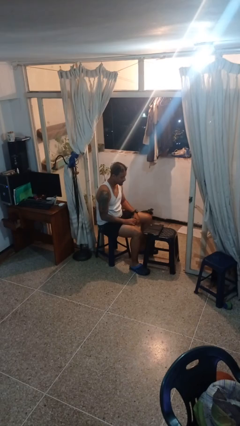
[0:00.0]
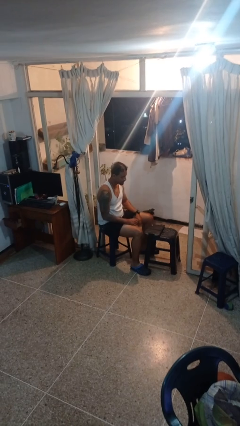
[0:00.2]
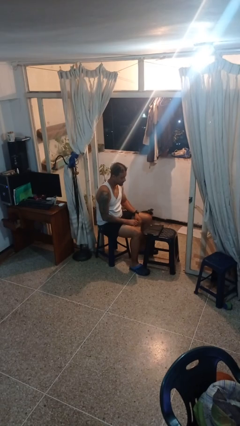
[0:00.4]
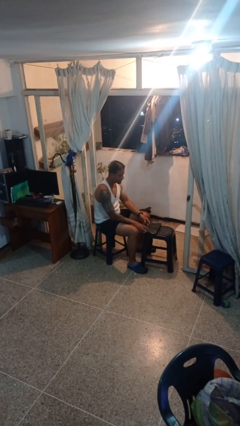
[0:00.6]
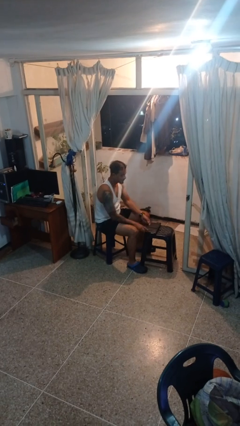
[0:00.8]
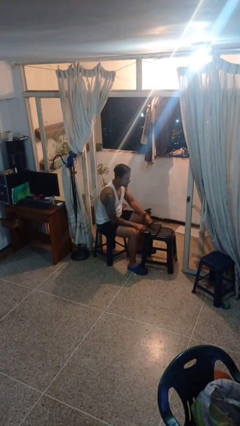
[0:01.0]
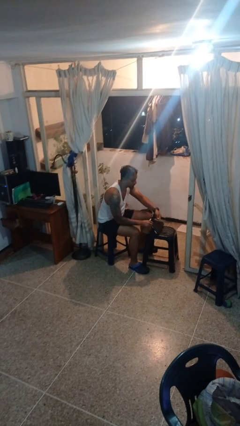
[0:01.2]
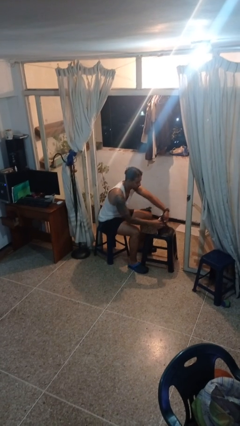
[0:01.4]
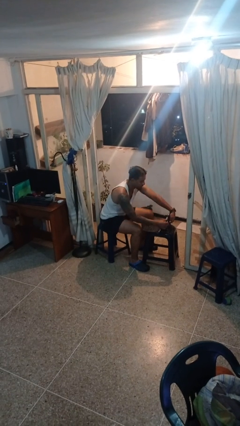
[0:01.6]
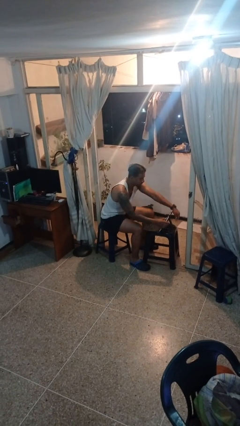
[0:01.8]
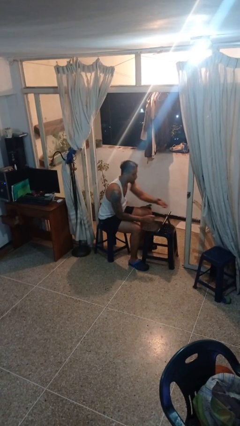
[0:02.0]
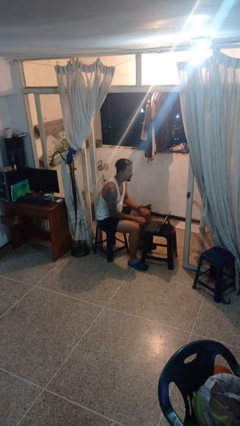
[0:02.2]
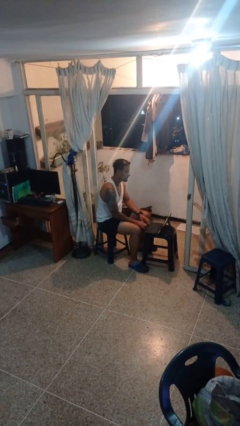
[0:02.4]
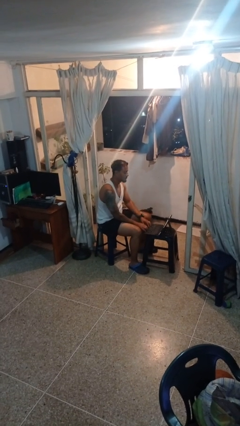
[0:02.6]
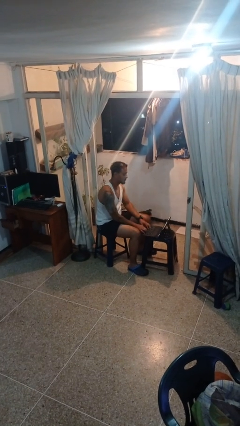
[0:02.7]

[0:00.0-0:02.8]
person opens laptop

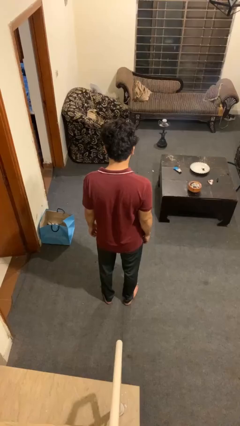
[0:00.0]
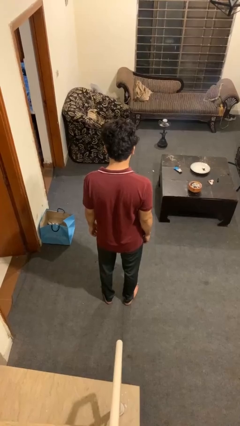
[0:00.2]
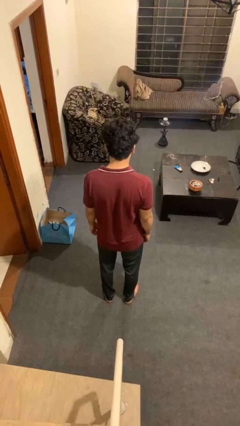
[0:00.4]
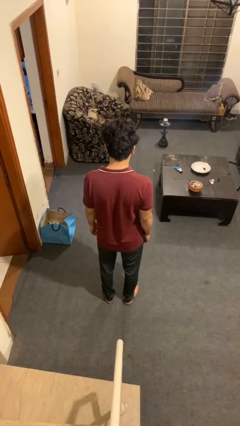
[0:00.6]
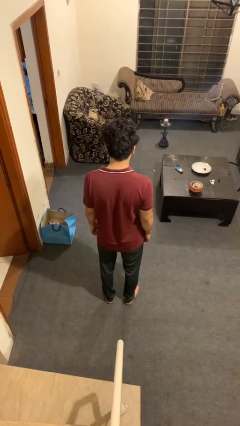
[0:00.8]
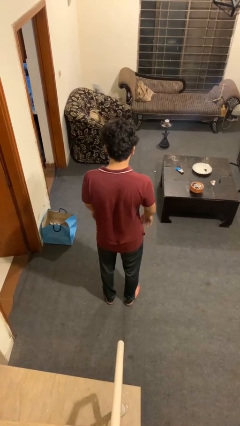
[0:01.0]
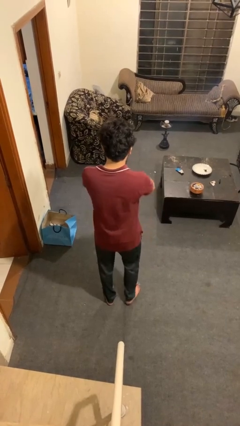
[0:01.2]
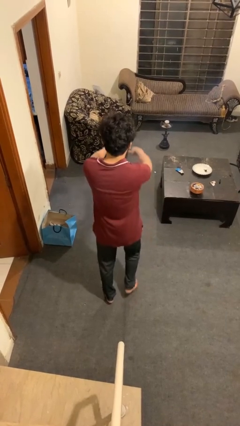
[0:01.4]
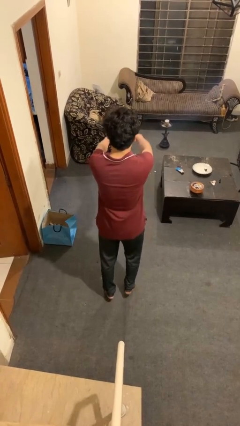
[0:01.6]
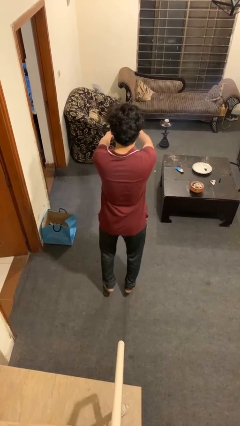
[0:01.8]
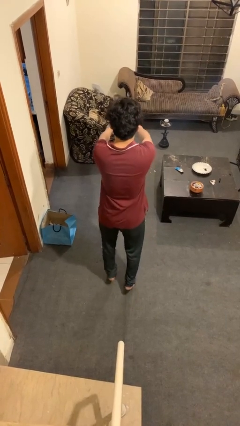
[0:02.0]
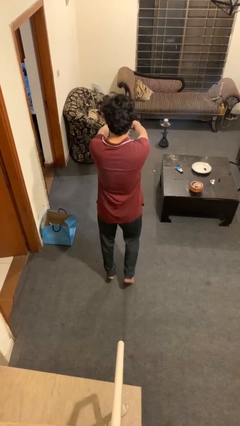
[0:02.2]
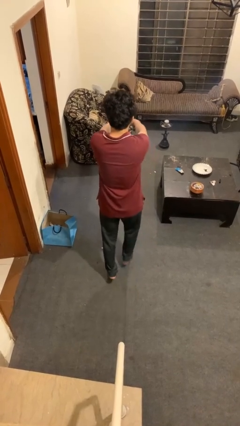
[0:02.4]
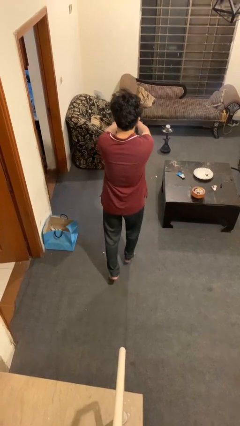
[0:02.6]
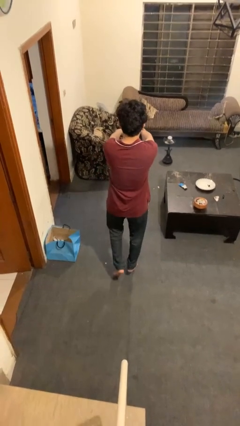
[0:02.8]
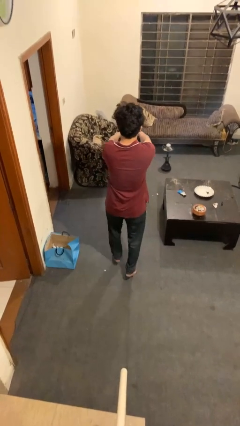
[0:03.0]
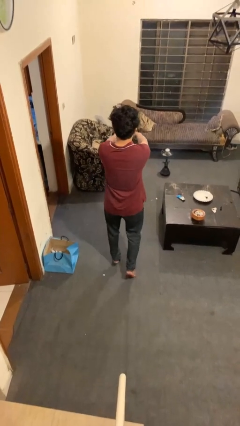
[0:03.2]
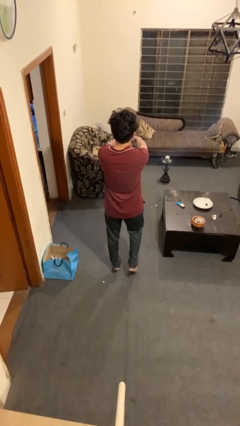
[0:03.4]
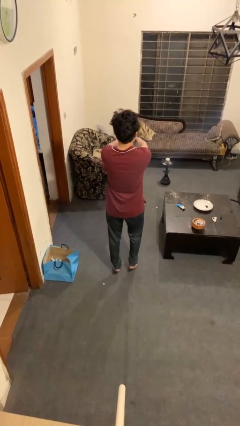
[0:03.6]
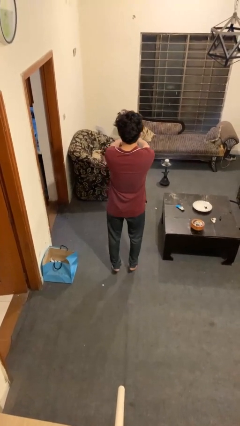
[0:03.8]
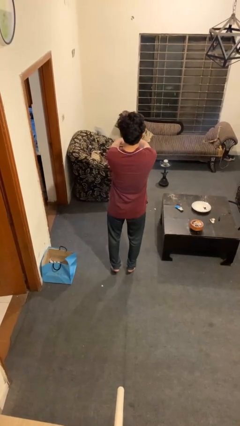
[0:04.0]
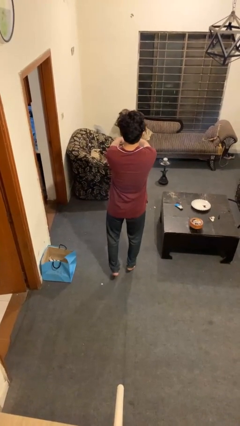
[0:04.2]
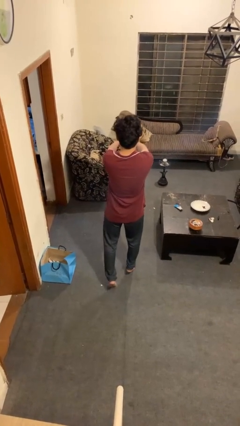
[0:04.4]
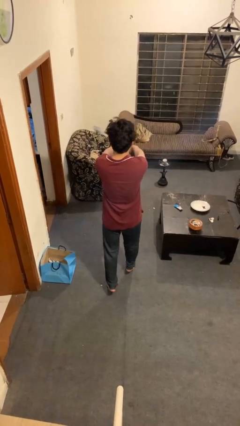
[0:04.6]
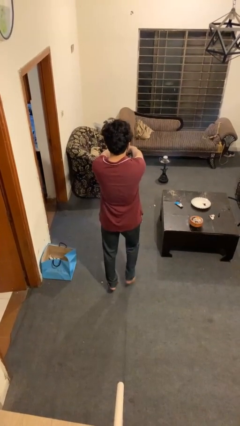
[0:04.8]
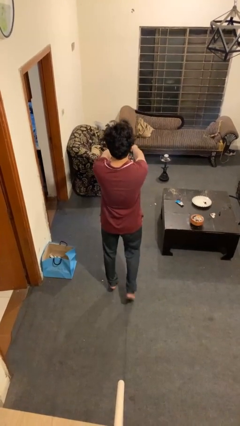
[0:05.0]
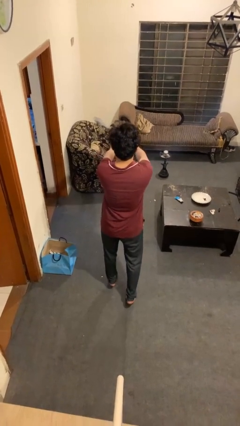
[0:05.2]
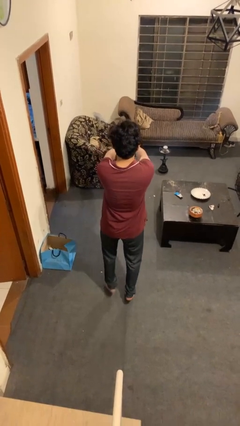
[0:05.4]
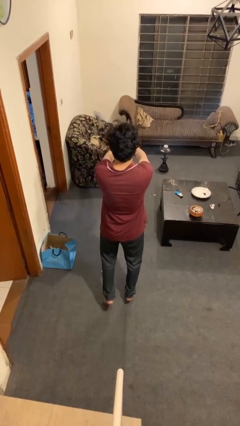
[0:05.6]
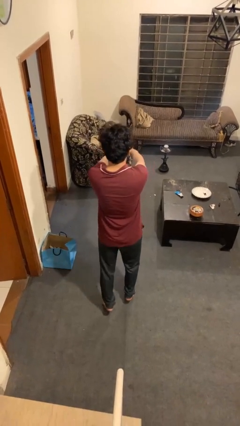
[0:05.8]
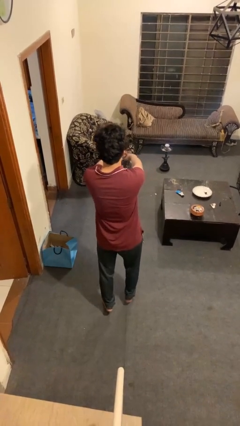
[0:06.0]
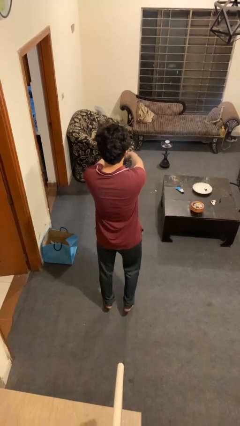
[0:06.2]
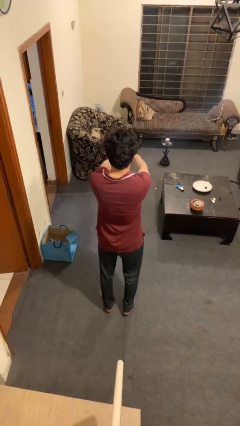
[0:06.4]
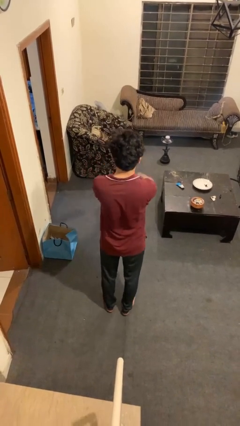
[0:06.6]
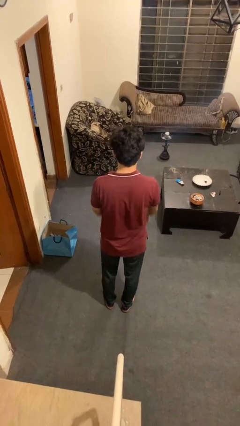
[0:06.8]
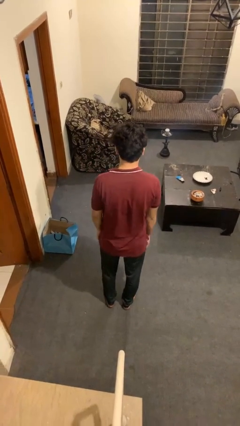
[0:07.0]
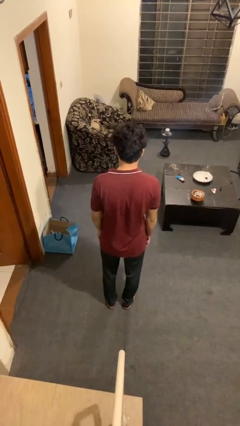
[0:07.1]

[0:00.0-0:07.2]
person walks tiptoe

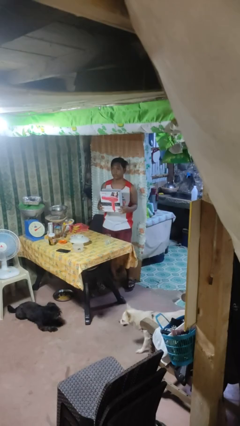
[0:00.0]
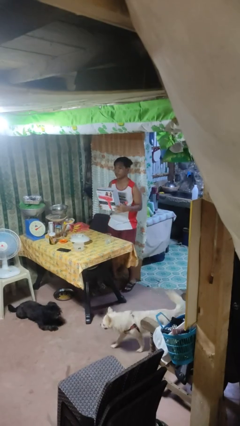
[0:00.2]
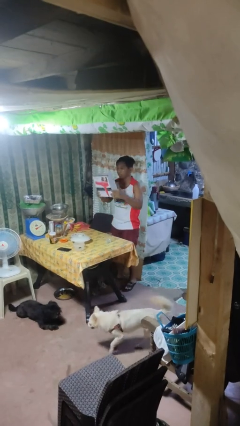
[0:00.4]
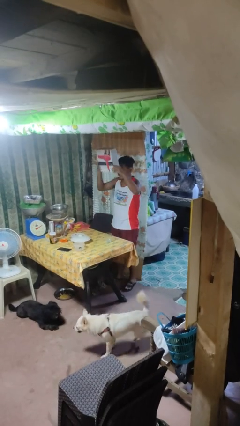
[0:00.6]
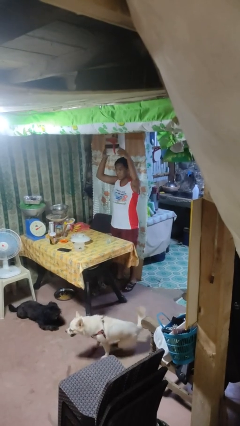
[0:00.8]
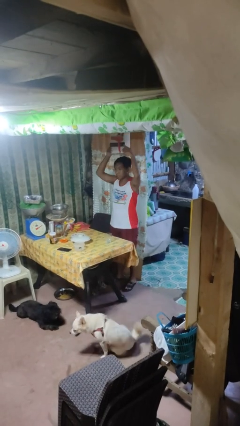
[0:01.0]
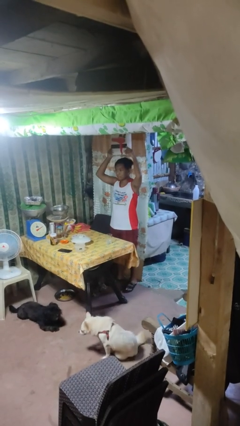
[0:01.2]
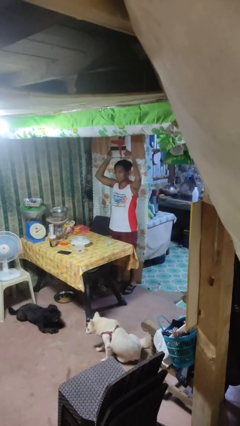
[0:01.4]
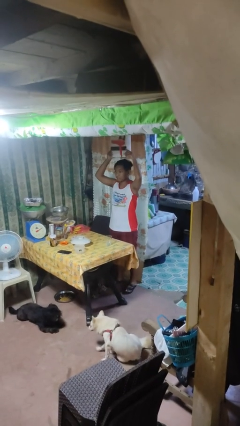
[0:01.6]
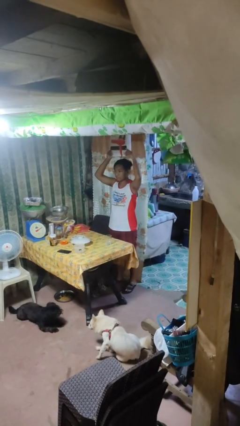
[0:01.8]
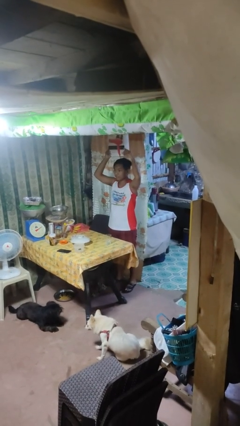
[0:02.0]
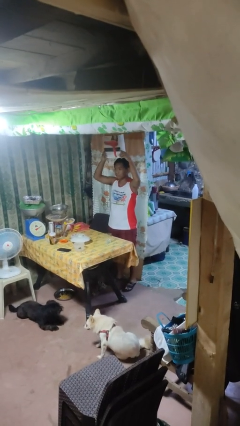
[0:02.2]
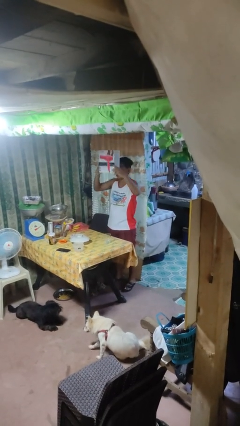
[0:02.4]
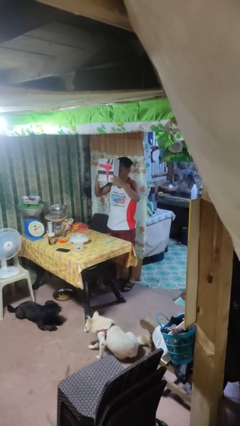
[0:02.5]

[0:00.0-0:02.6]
person holds object above head

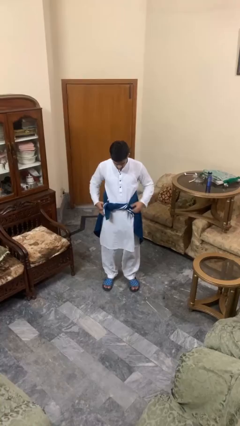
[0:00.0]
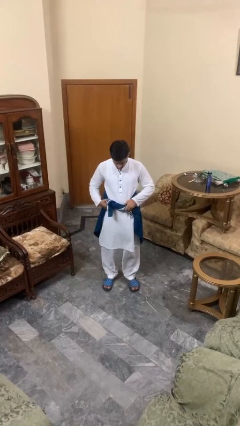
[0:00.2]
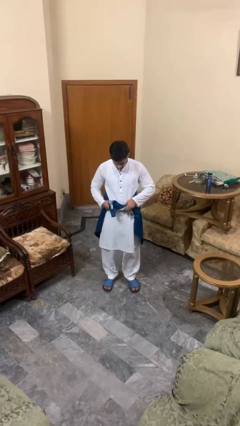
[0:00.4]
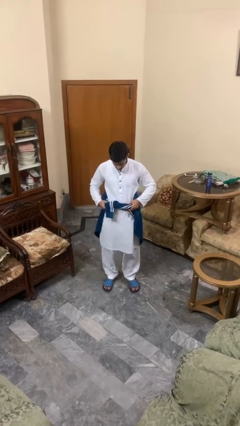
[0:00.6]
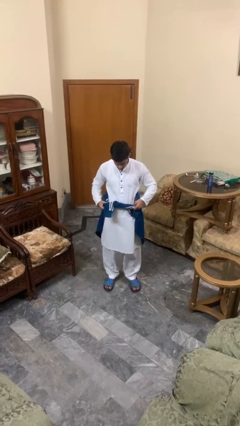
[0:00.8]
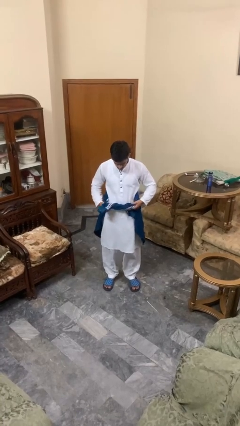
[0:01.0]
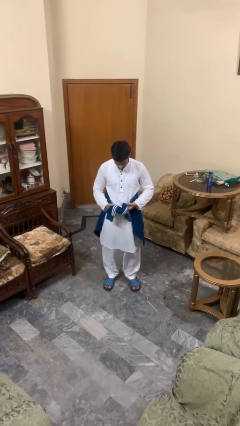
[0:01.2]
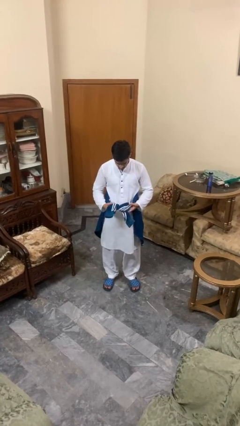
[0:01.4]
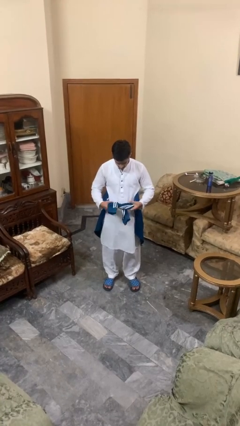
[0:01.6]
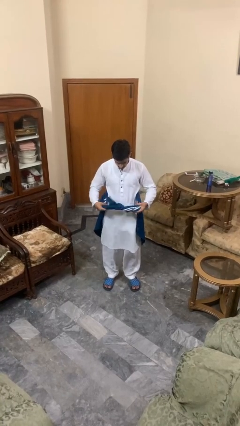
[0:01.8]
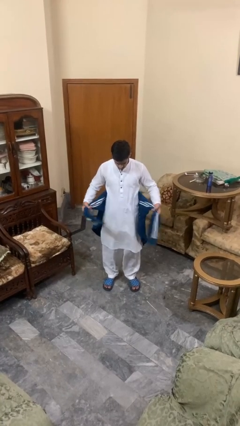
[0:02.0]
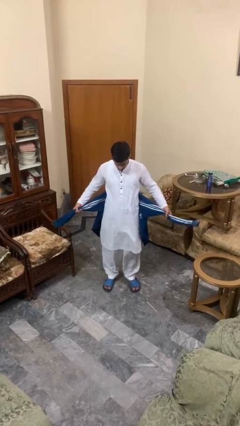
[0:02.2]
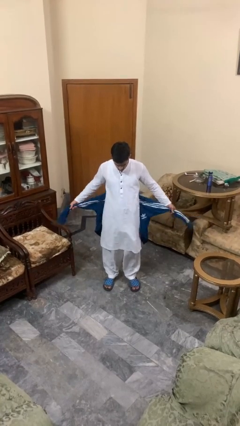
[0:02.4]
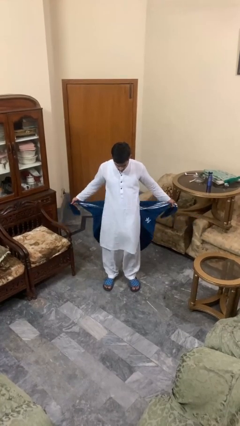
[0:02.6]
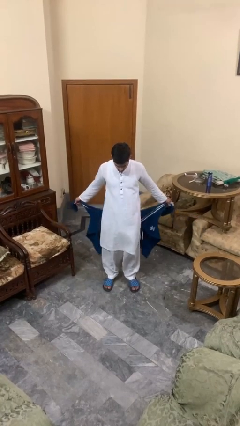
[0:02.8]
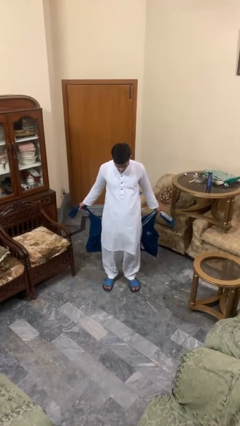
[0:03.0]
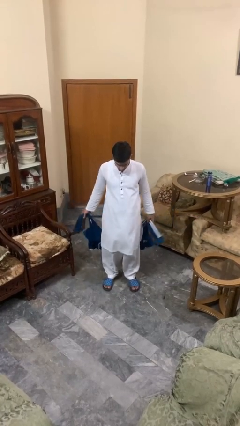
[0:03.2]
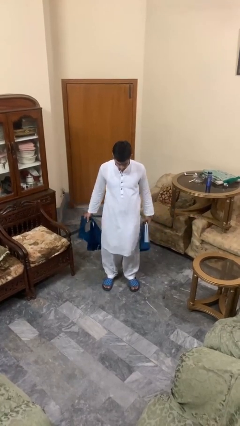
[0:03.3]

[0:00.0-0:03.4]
person unties jacket around waist

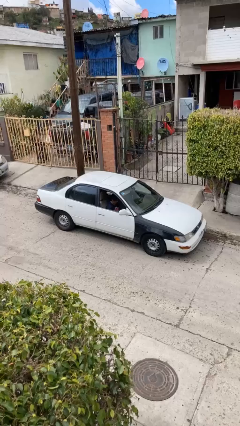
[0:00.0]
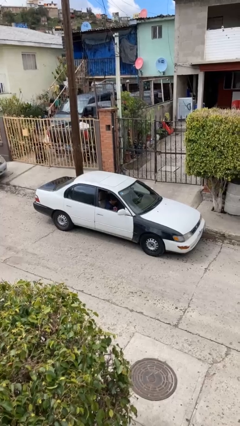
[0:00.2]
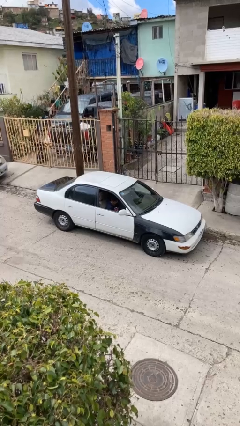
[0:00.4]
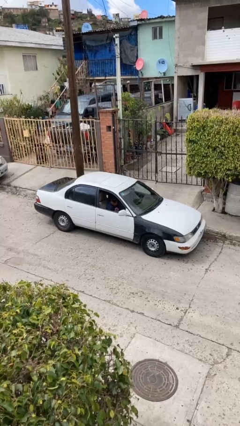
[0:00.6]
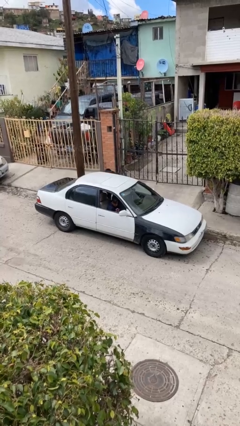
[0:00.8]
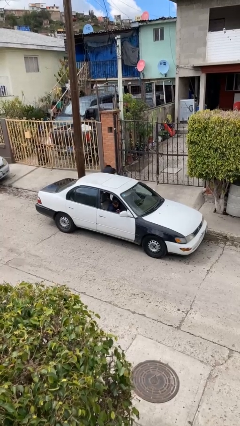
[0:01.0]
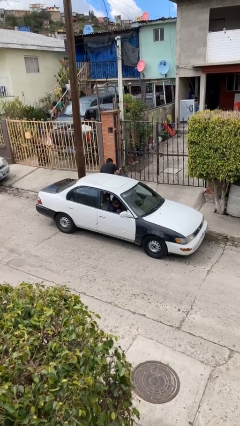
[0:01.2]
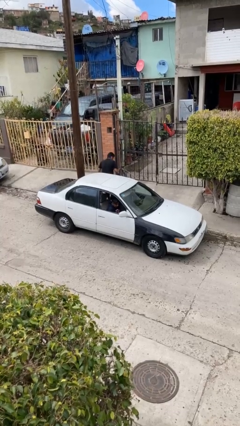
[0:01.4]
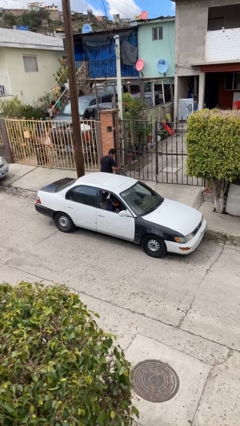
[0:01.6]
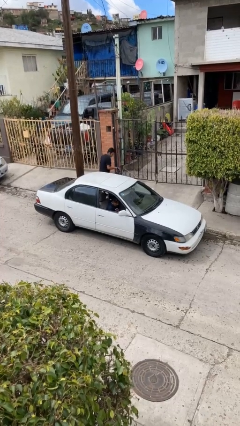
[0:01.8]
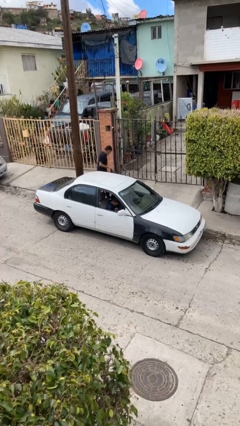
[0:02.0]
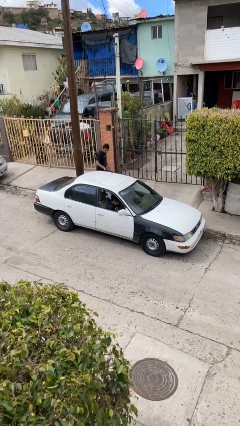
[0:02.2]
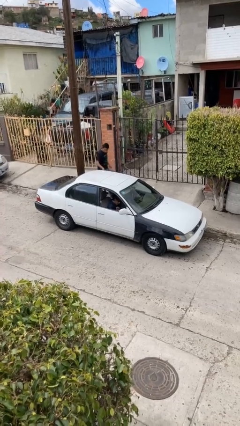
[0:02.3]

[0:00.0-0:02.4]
car drops off person
